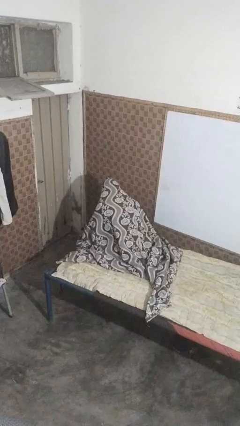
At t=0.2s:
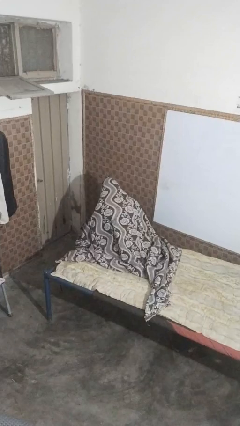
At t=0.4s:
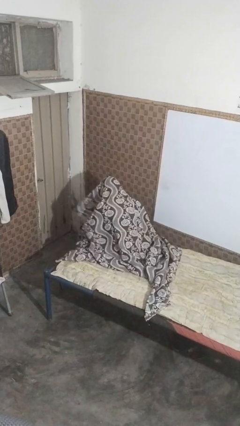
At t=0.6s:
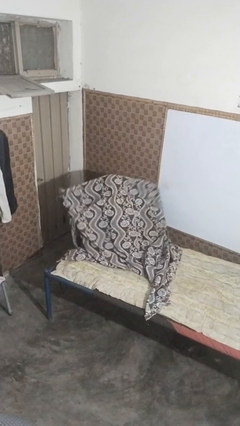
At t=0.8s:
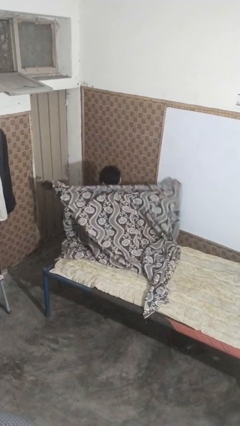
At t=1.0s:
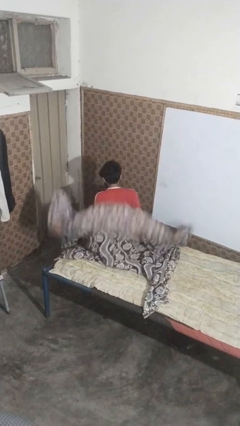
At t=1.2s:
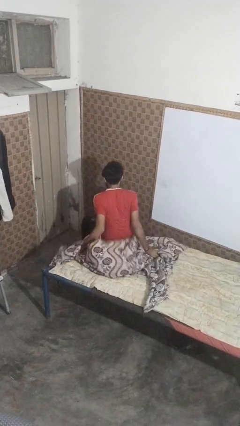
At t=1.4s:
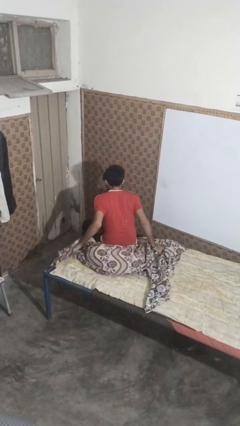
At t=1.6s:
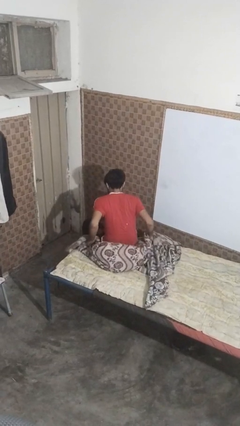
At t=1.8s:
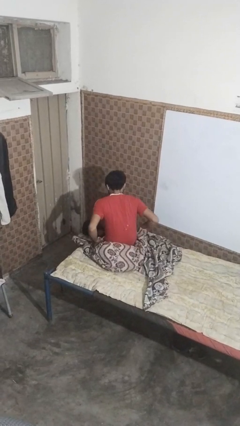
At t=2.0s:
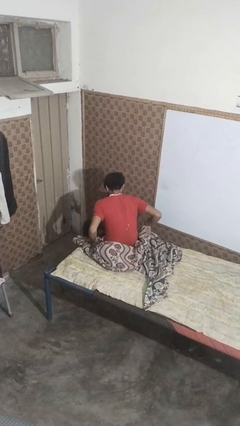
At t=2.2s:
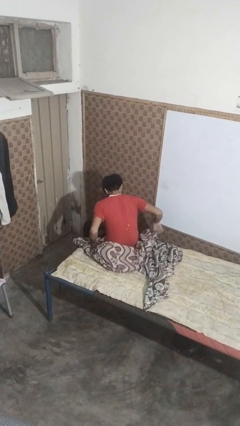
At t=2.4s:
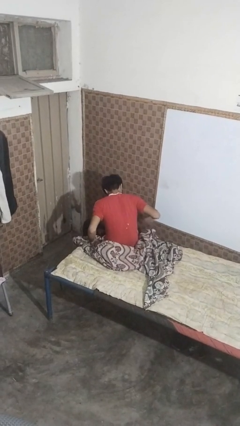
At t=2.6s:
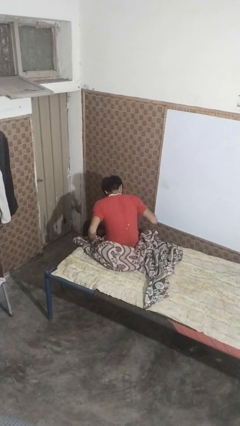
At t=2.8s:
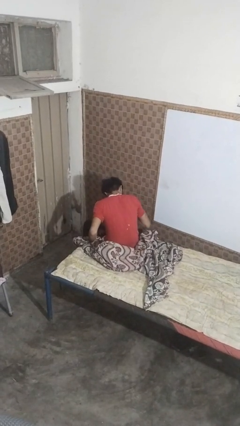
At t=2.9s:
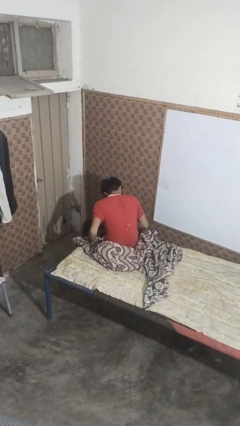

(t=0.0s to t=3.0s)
person uncovers with bedsheets

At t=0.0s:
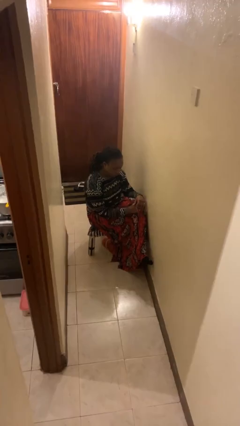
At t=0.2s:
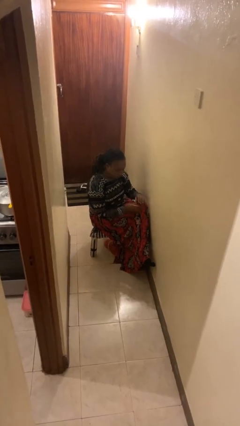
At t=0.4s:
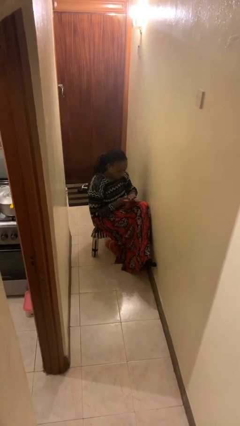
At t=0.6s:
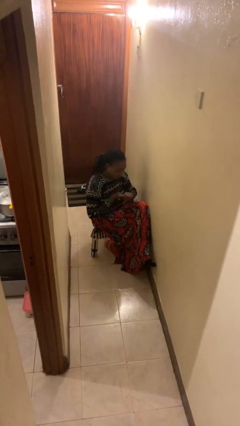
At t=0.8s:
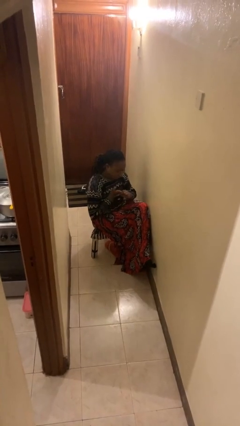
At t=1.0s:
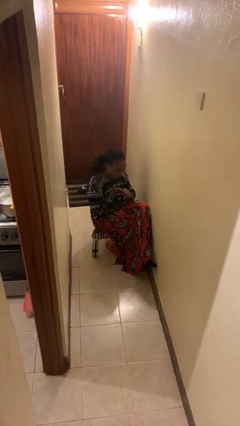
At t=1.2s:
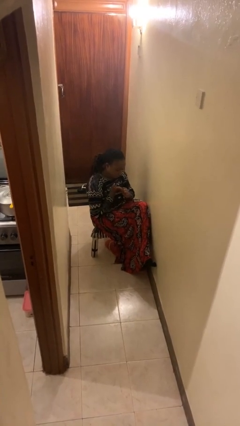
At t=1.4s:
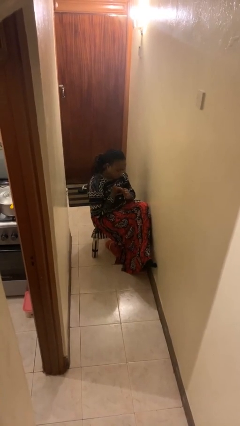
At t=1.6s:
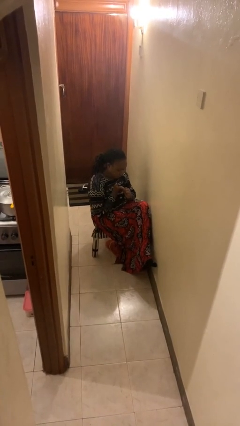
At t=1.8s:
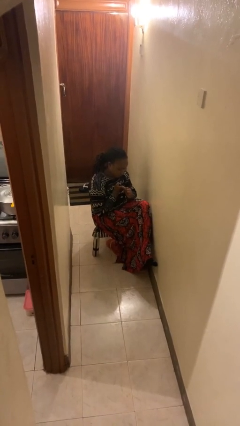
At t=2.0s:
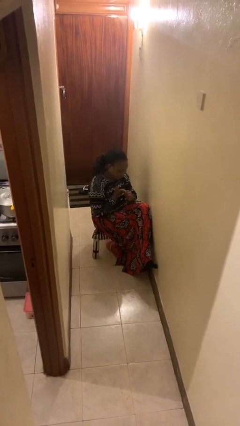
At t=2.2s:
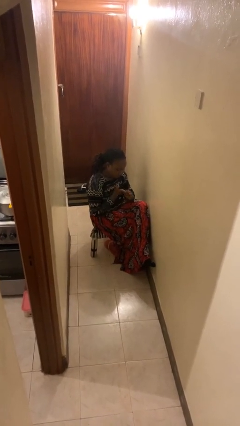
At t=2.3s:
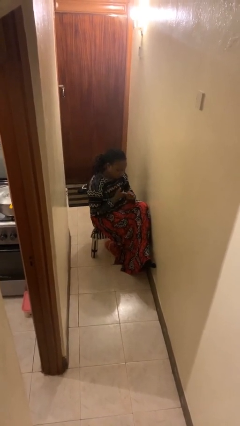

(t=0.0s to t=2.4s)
person cracks knuckles

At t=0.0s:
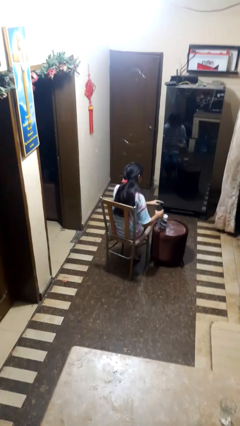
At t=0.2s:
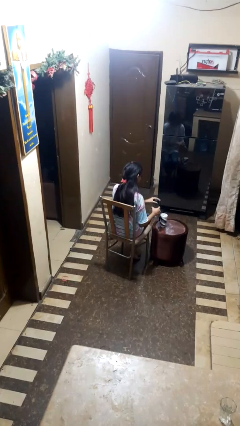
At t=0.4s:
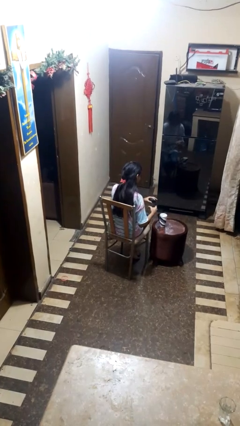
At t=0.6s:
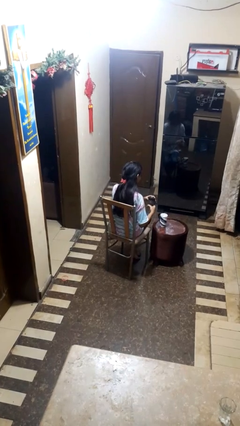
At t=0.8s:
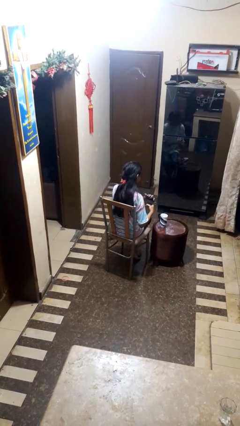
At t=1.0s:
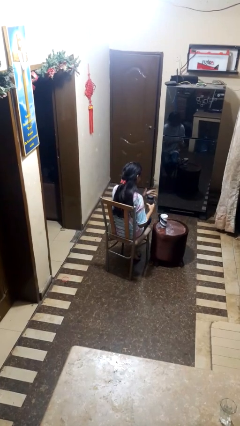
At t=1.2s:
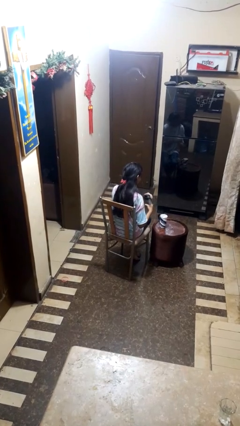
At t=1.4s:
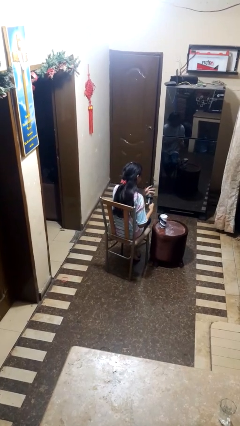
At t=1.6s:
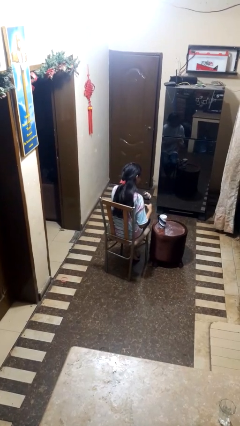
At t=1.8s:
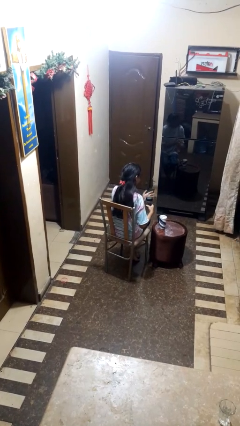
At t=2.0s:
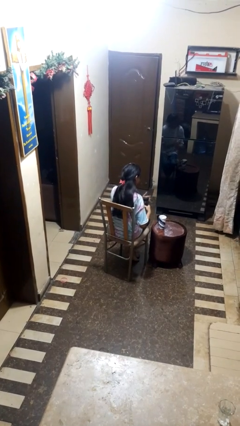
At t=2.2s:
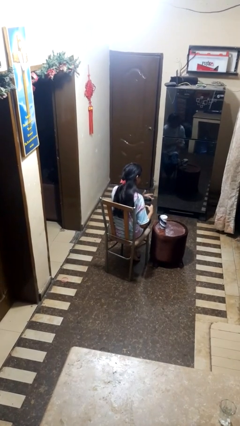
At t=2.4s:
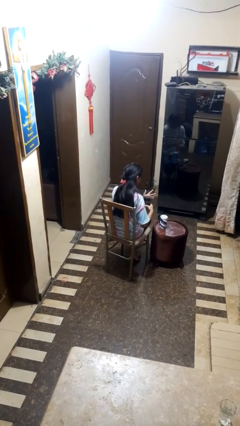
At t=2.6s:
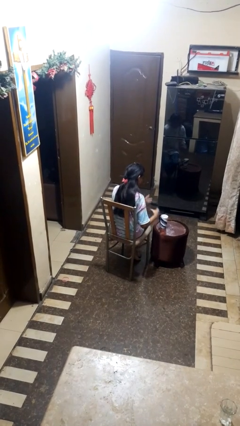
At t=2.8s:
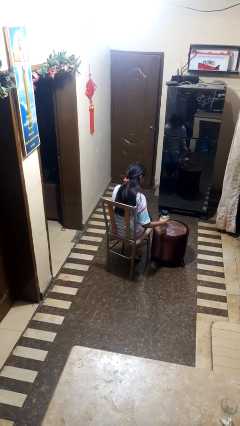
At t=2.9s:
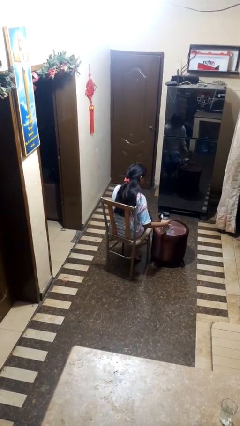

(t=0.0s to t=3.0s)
person screws lid to bottle

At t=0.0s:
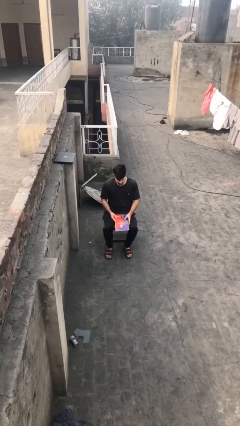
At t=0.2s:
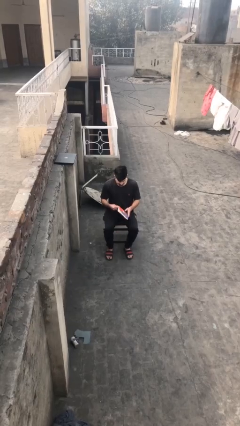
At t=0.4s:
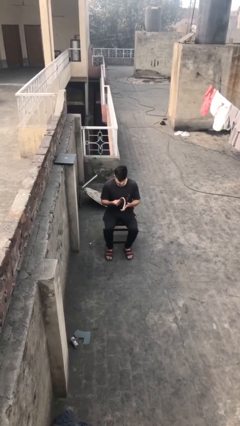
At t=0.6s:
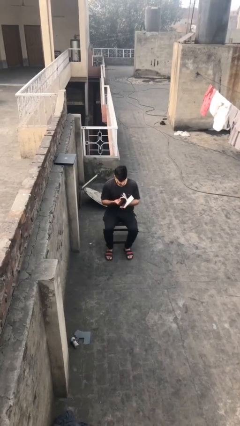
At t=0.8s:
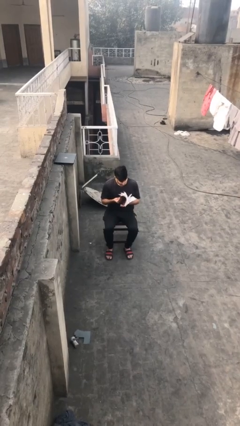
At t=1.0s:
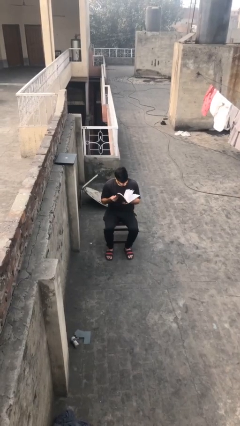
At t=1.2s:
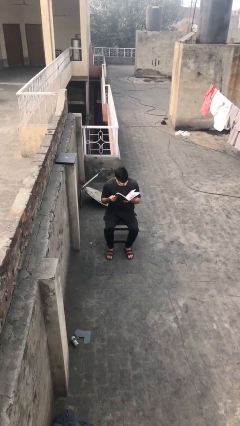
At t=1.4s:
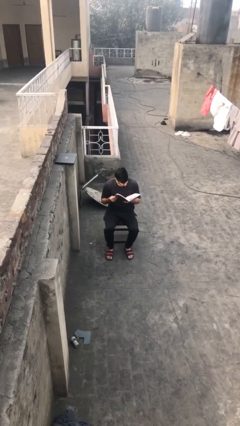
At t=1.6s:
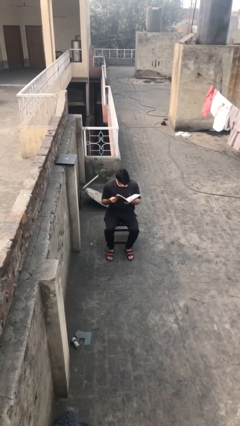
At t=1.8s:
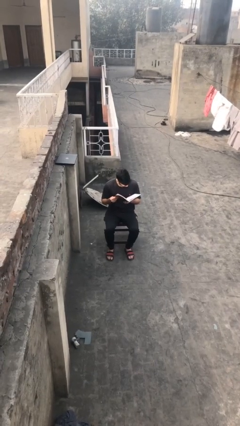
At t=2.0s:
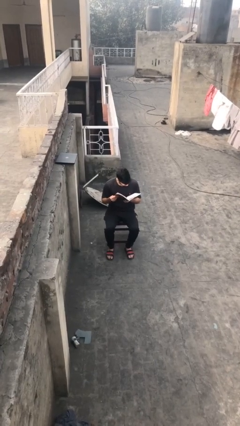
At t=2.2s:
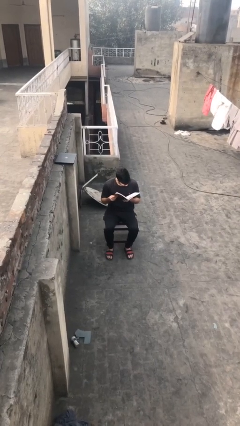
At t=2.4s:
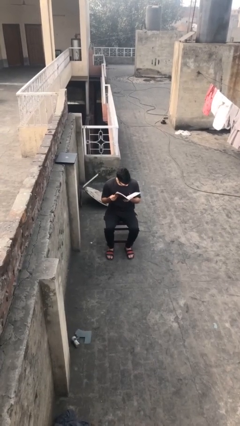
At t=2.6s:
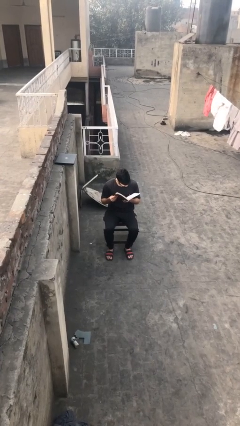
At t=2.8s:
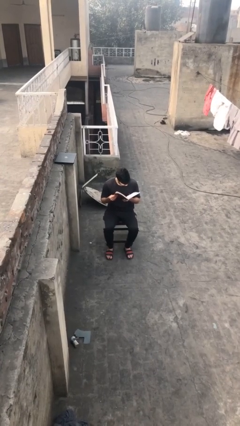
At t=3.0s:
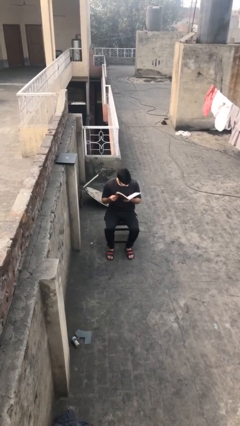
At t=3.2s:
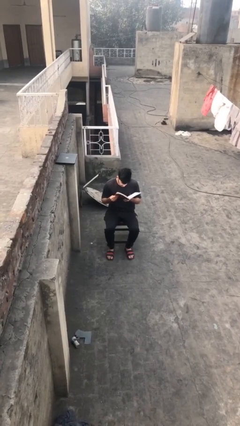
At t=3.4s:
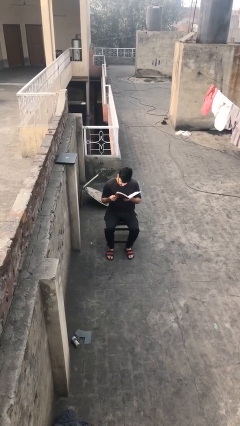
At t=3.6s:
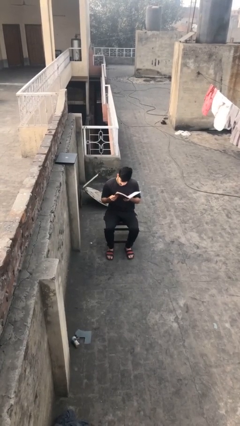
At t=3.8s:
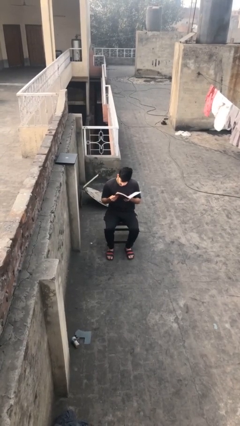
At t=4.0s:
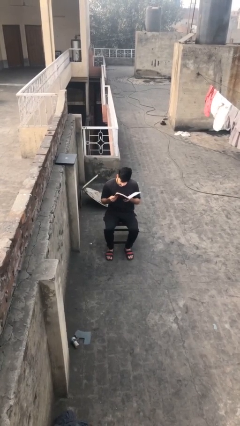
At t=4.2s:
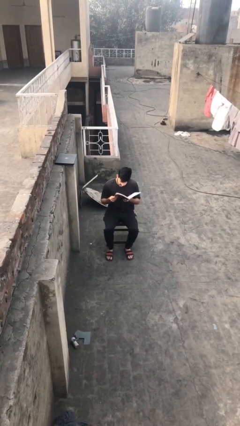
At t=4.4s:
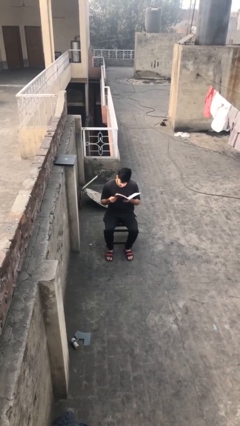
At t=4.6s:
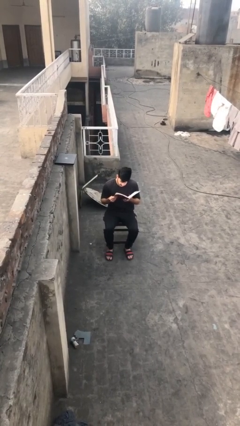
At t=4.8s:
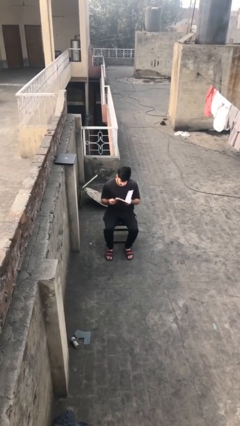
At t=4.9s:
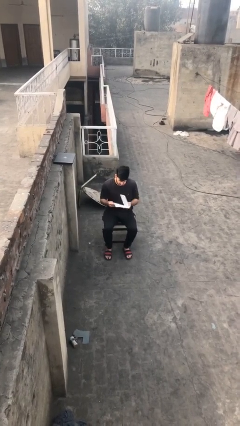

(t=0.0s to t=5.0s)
person reads document

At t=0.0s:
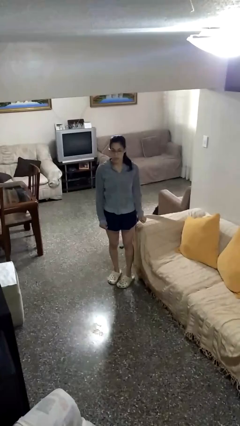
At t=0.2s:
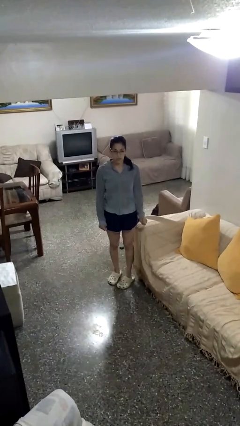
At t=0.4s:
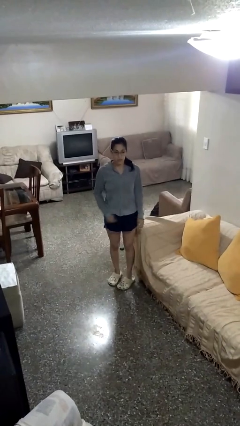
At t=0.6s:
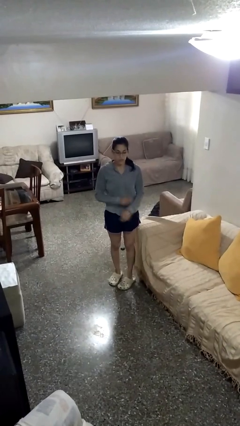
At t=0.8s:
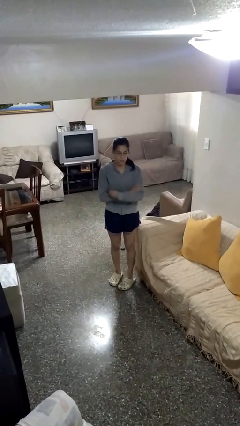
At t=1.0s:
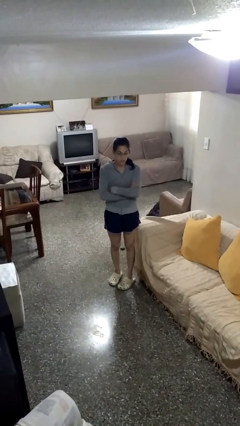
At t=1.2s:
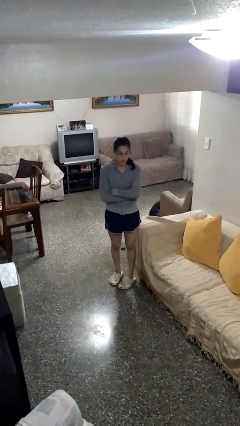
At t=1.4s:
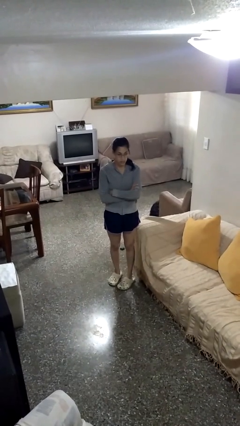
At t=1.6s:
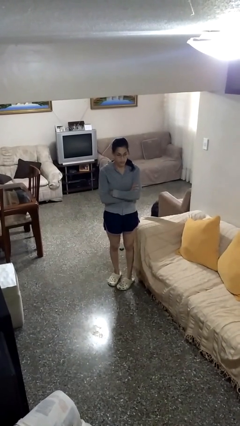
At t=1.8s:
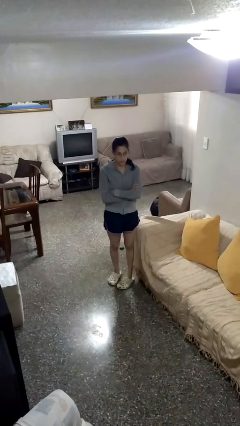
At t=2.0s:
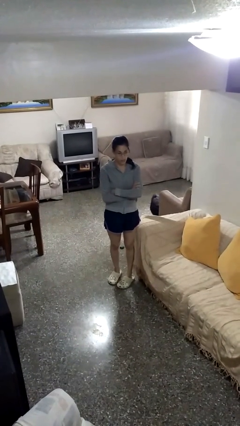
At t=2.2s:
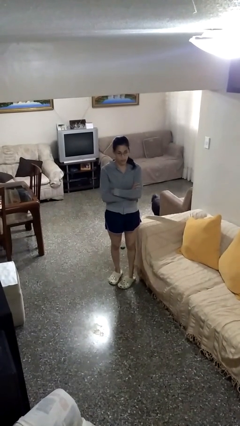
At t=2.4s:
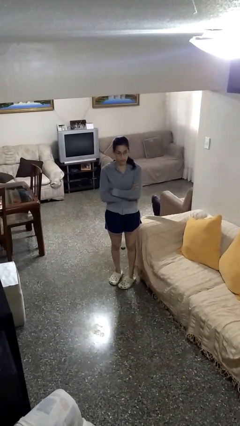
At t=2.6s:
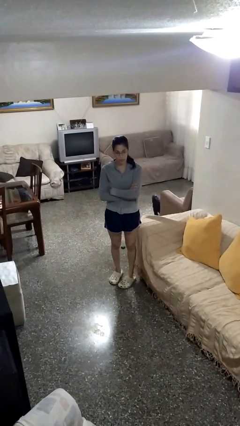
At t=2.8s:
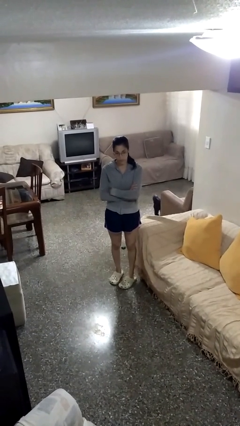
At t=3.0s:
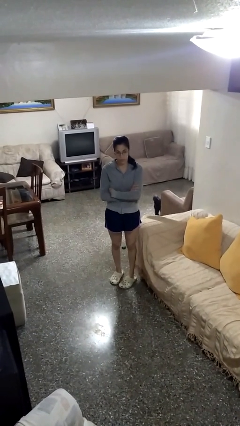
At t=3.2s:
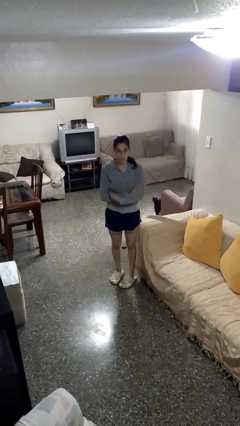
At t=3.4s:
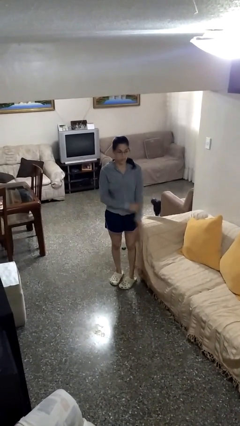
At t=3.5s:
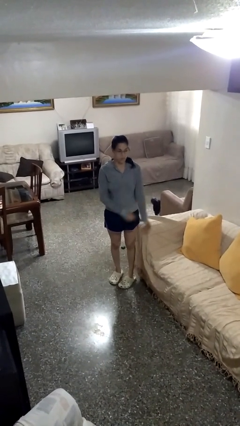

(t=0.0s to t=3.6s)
person crosses arms

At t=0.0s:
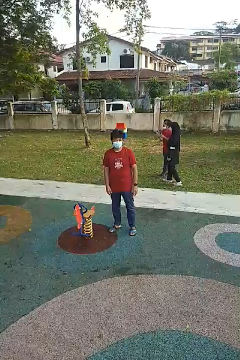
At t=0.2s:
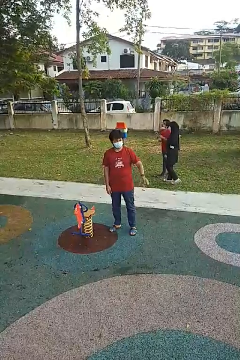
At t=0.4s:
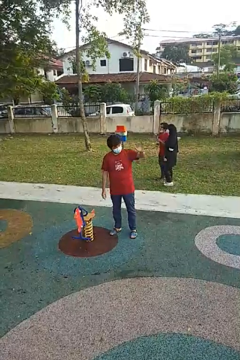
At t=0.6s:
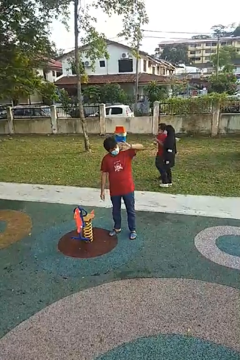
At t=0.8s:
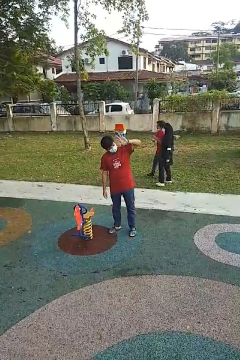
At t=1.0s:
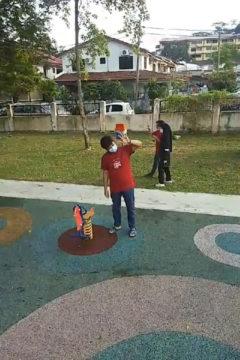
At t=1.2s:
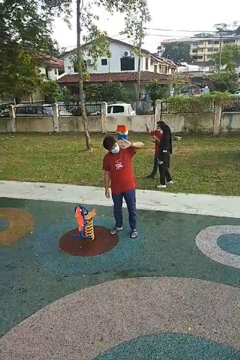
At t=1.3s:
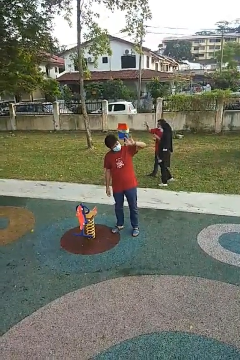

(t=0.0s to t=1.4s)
person waves at person
